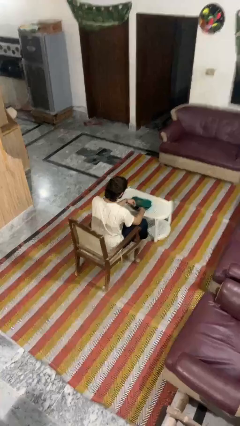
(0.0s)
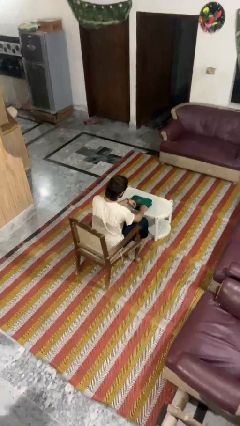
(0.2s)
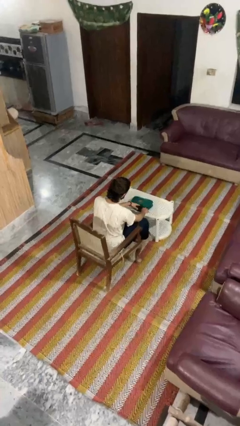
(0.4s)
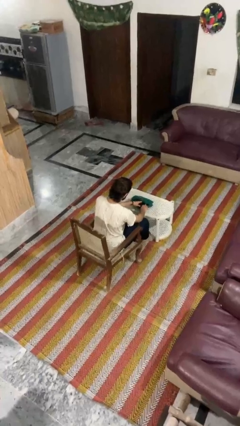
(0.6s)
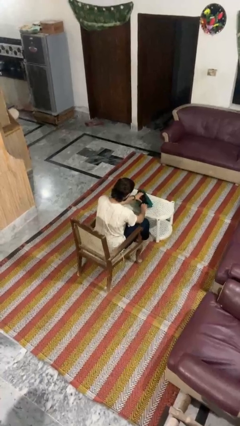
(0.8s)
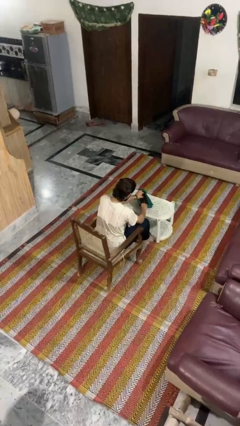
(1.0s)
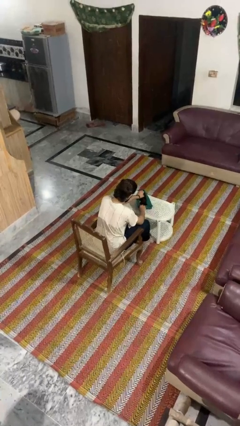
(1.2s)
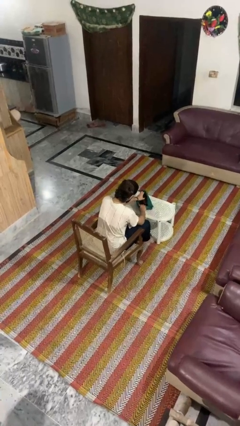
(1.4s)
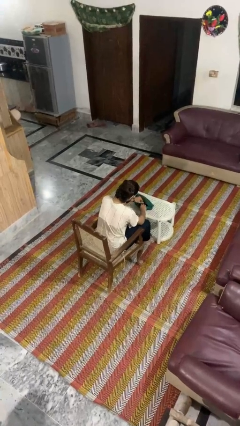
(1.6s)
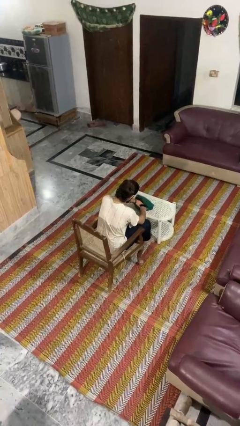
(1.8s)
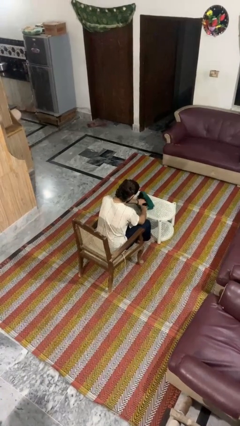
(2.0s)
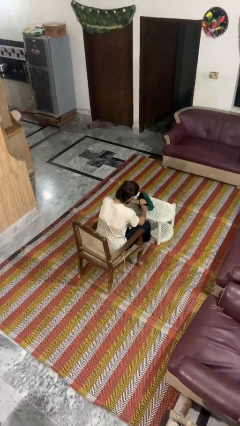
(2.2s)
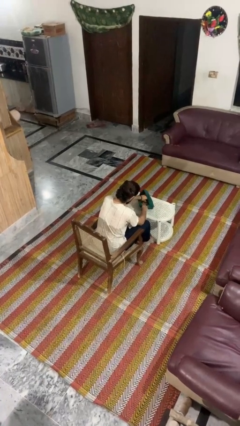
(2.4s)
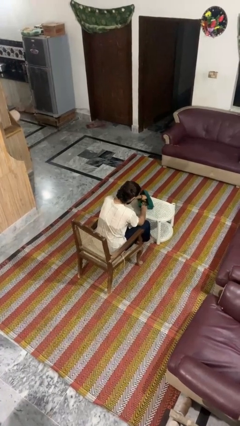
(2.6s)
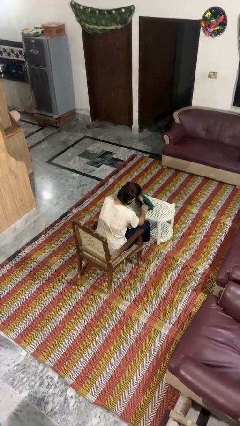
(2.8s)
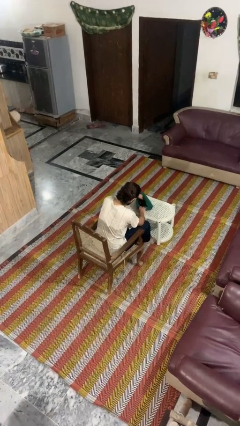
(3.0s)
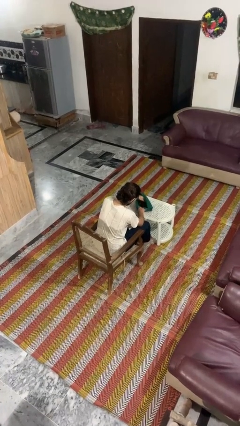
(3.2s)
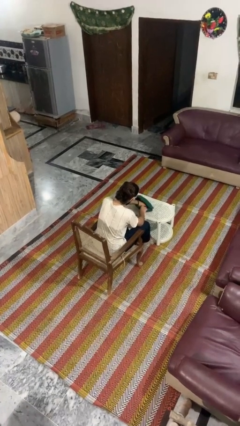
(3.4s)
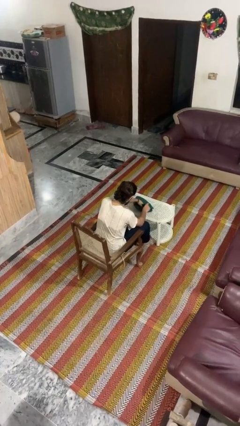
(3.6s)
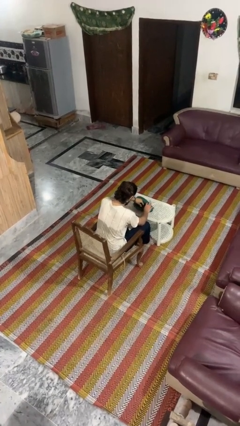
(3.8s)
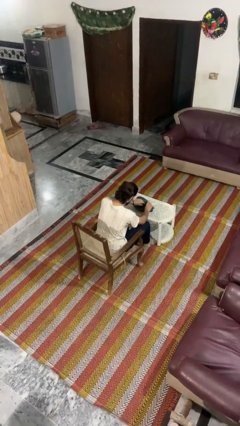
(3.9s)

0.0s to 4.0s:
person searches in purse

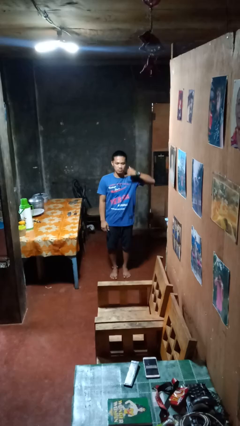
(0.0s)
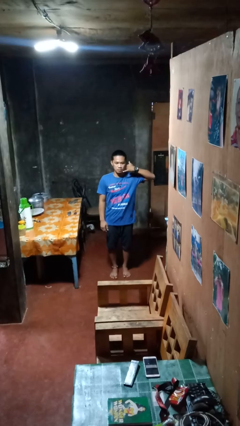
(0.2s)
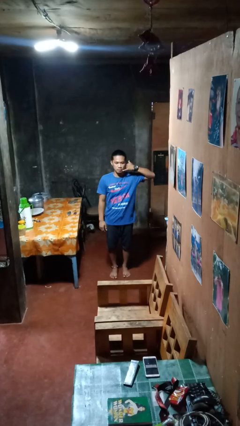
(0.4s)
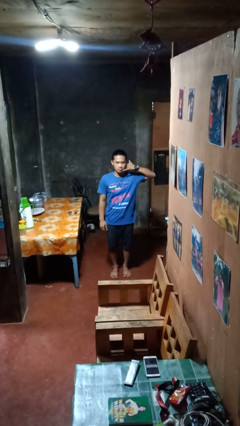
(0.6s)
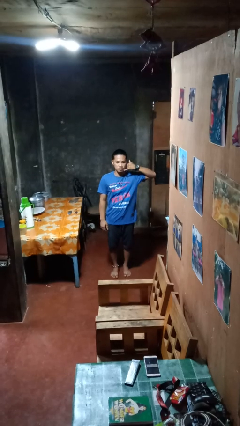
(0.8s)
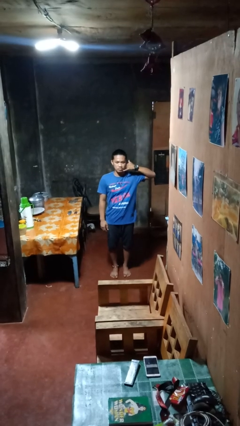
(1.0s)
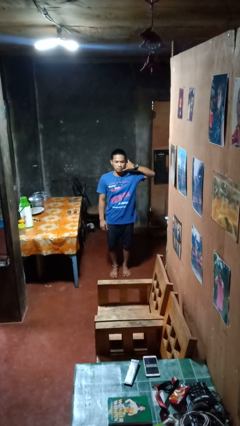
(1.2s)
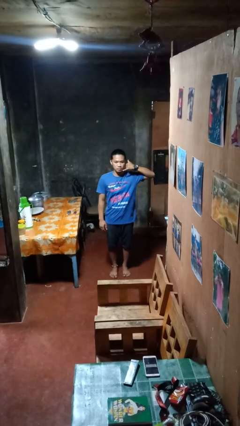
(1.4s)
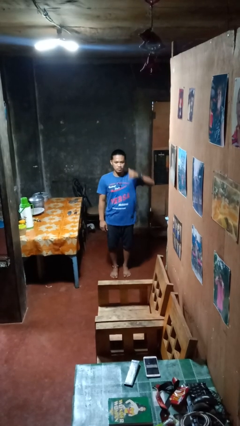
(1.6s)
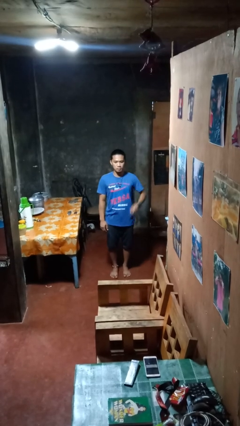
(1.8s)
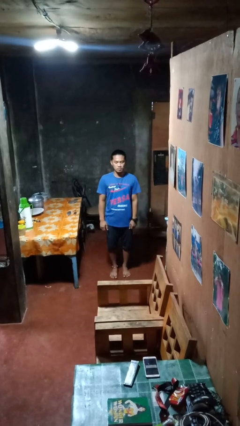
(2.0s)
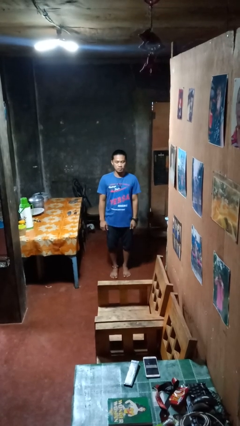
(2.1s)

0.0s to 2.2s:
person gestures call me

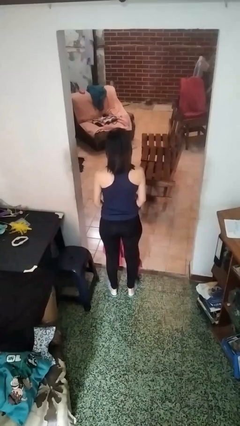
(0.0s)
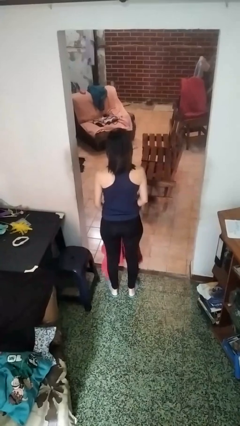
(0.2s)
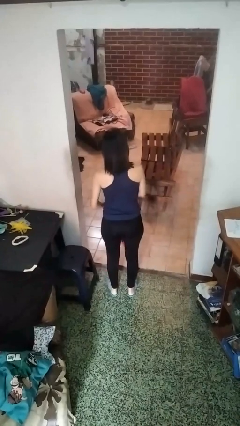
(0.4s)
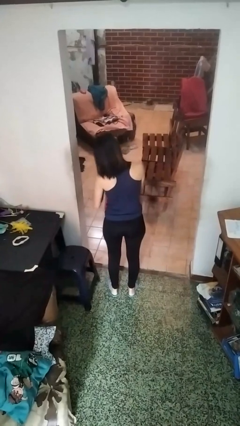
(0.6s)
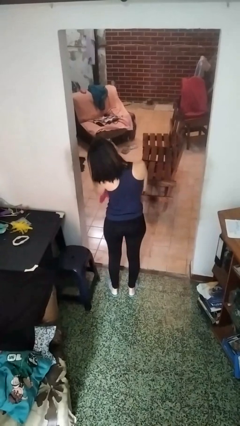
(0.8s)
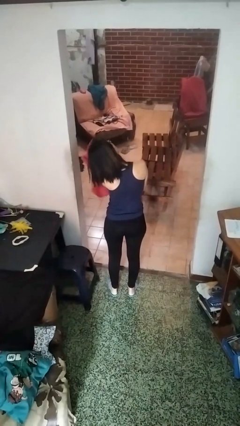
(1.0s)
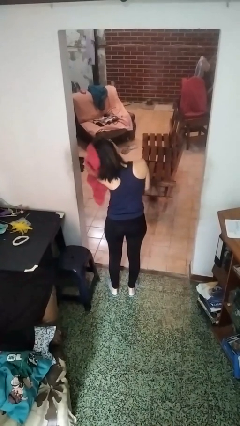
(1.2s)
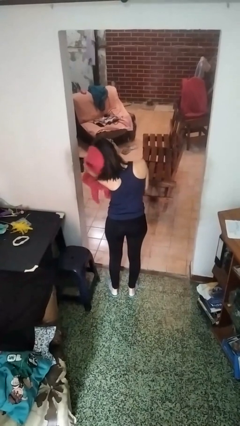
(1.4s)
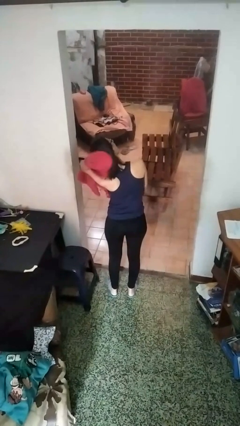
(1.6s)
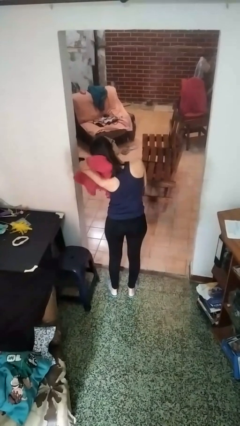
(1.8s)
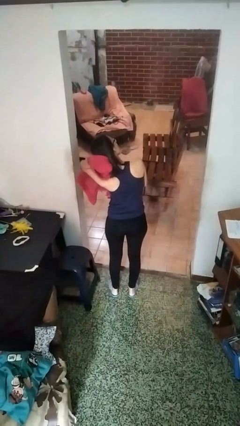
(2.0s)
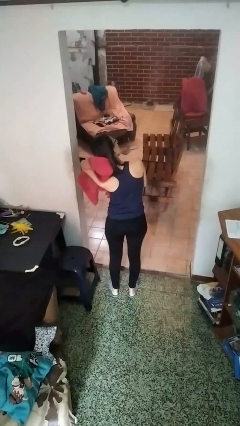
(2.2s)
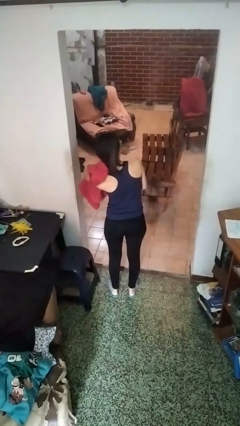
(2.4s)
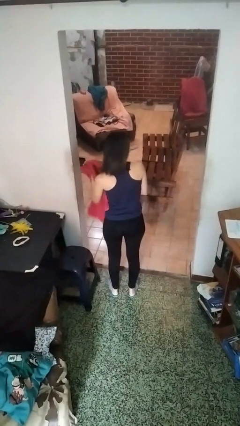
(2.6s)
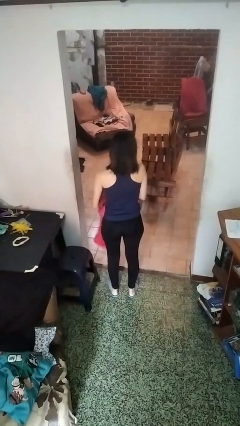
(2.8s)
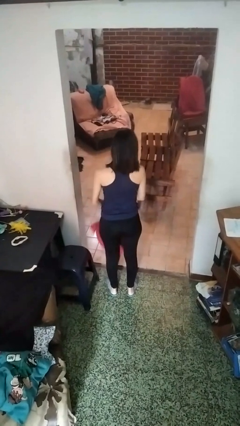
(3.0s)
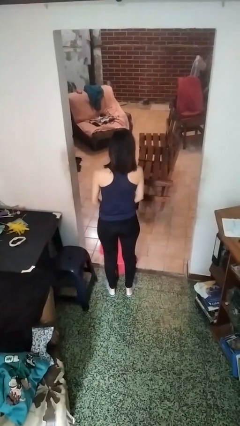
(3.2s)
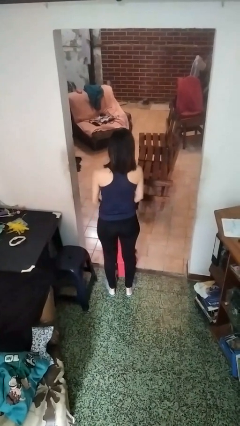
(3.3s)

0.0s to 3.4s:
person dries hair with towel

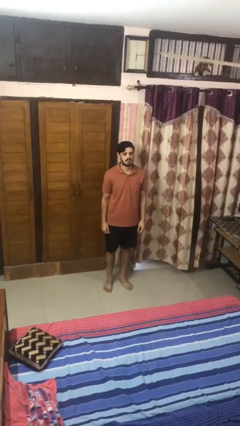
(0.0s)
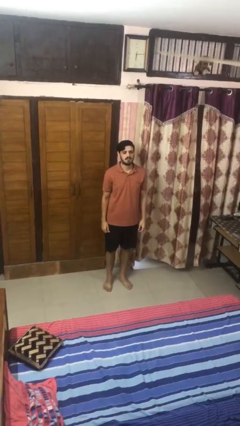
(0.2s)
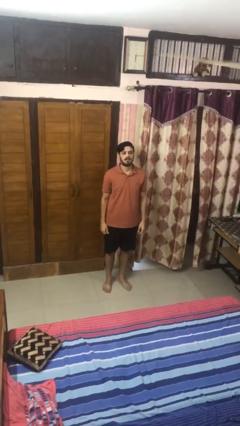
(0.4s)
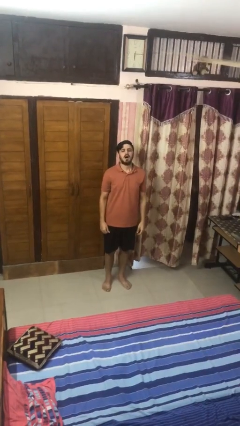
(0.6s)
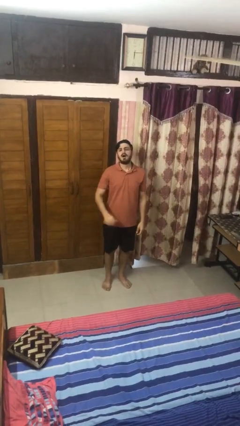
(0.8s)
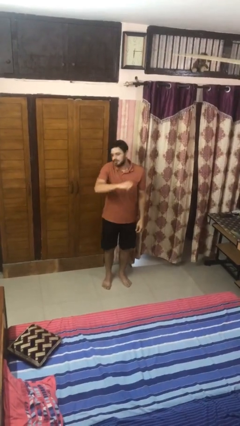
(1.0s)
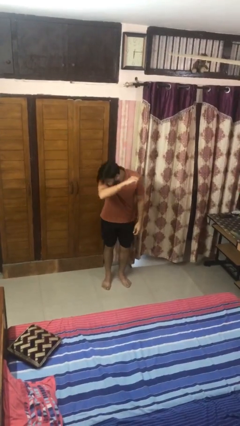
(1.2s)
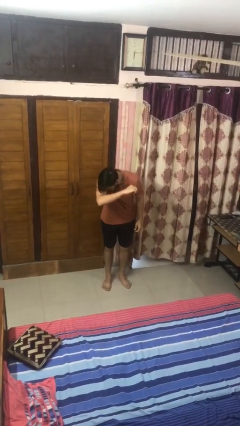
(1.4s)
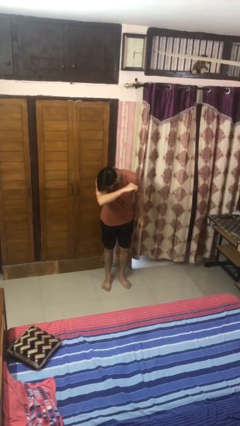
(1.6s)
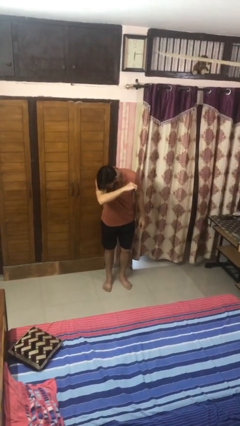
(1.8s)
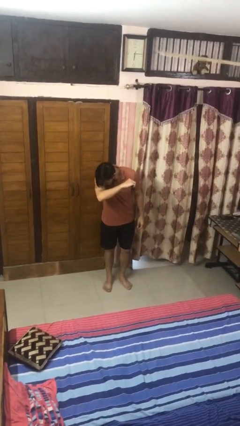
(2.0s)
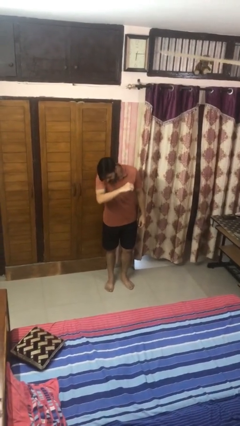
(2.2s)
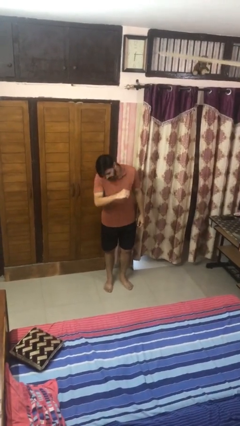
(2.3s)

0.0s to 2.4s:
person sneezes into arm

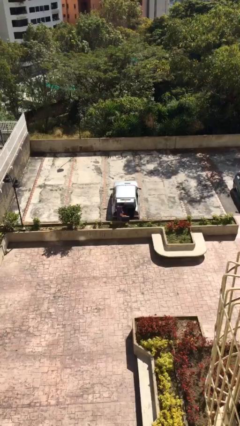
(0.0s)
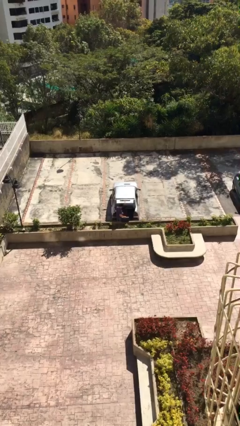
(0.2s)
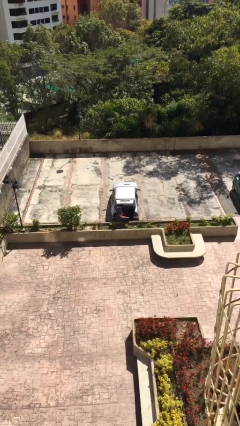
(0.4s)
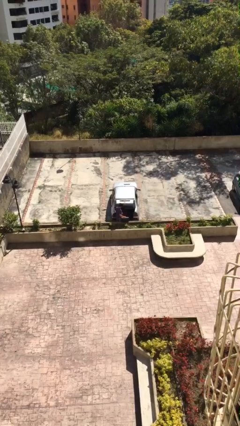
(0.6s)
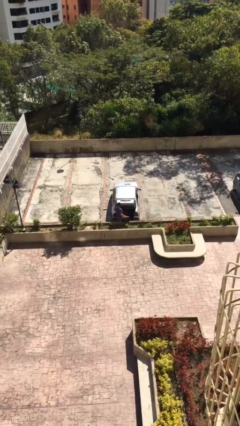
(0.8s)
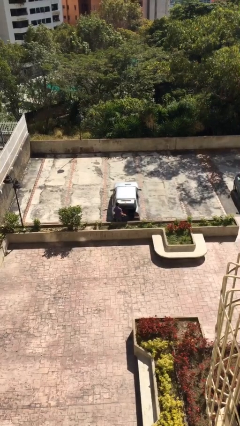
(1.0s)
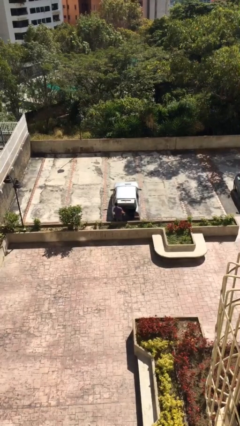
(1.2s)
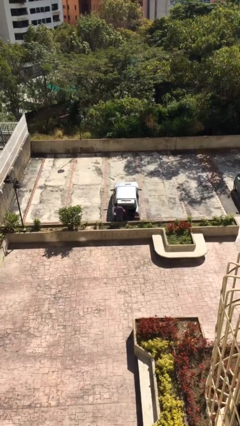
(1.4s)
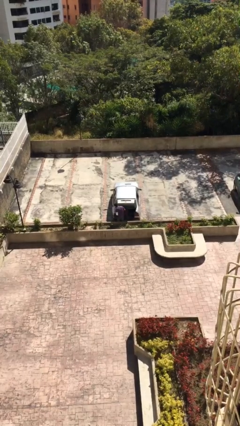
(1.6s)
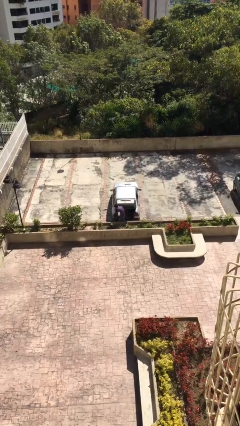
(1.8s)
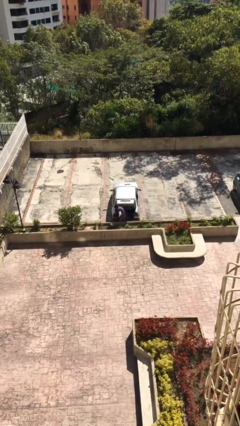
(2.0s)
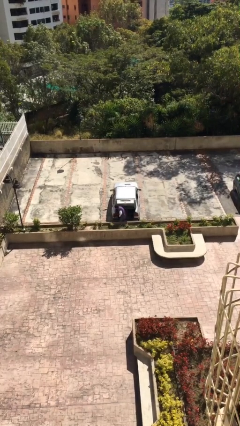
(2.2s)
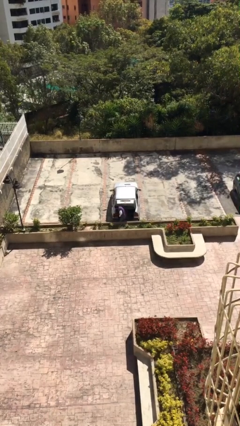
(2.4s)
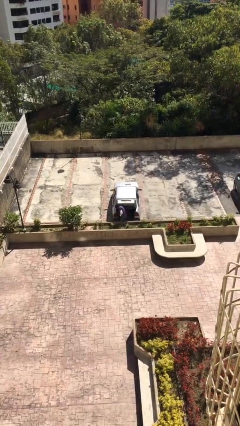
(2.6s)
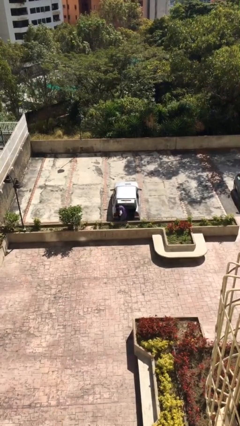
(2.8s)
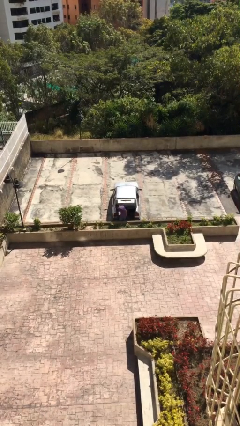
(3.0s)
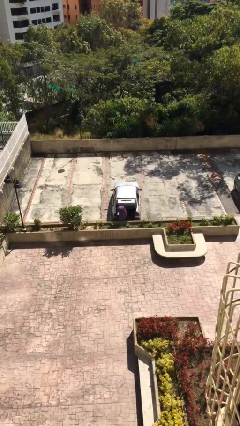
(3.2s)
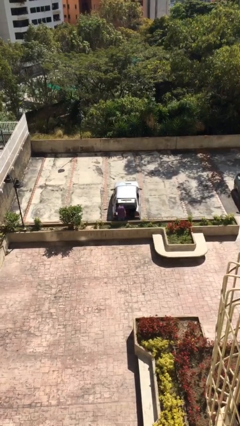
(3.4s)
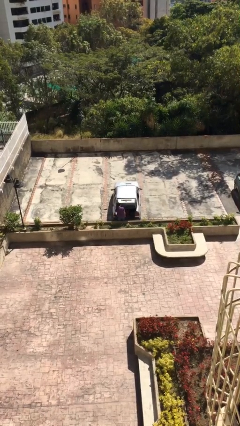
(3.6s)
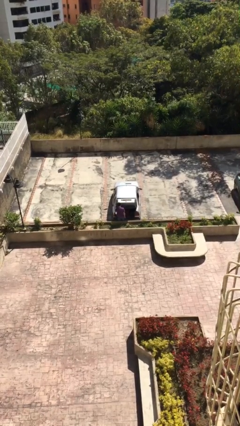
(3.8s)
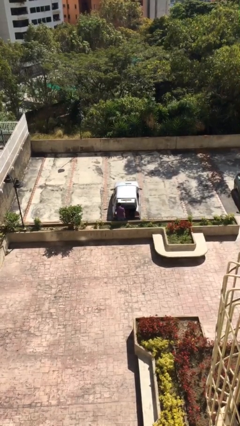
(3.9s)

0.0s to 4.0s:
person loads car

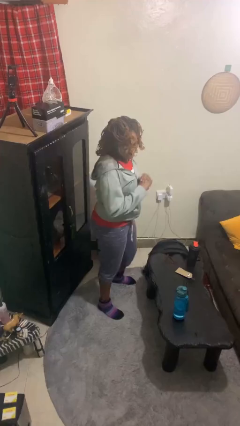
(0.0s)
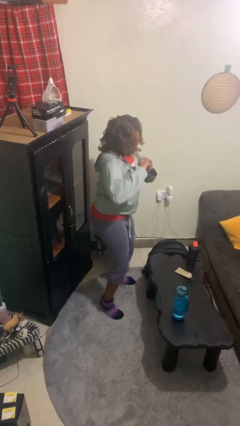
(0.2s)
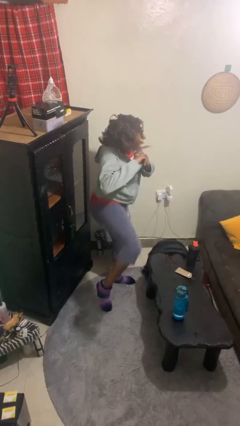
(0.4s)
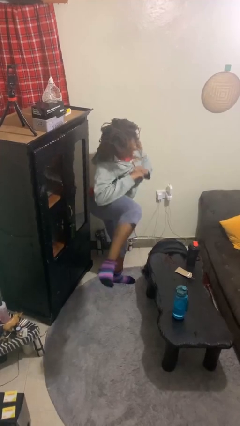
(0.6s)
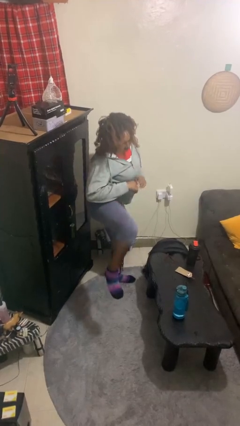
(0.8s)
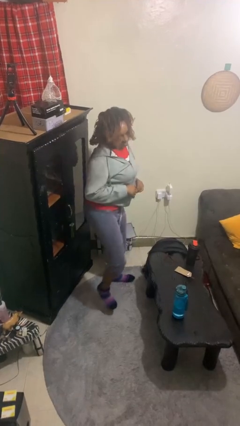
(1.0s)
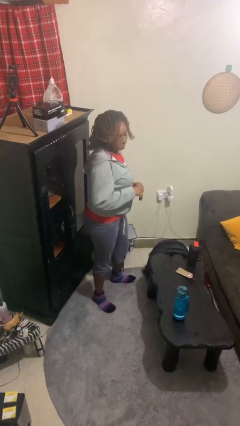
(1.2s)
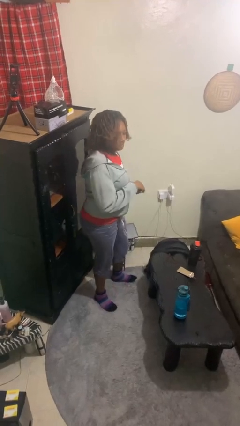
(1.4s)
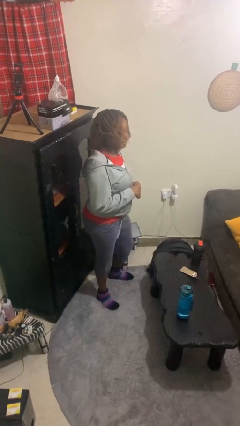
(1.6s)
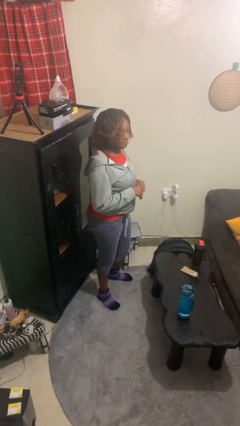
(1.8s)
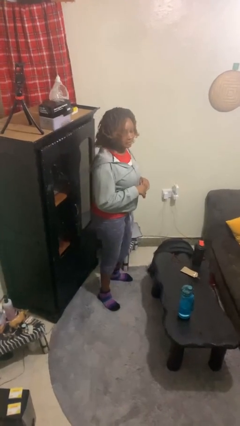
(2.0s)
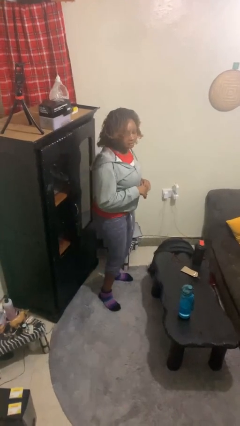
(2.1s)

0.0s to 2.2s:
person karate kicks
